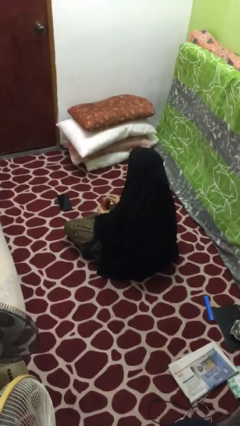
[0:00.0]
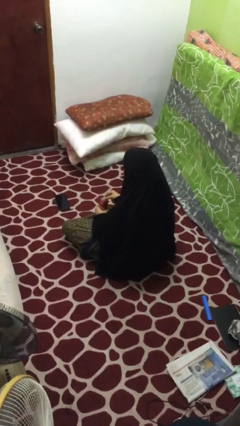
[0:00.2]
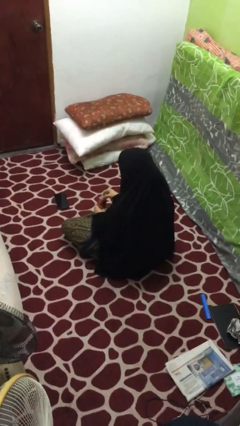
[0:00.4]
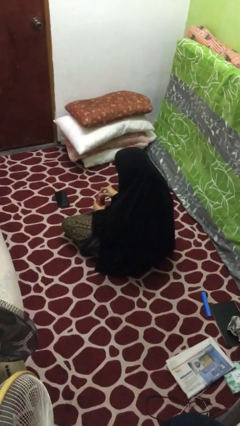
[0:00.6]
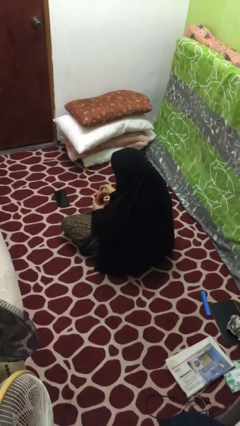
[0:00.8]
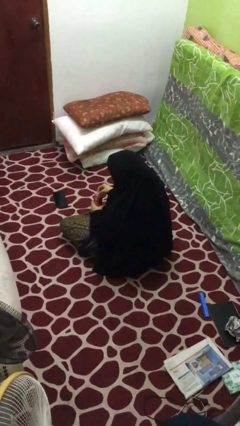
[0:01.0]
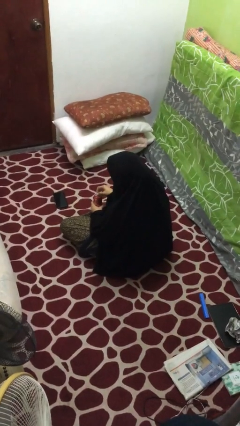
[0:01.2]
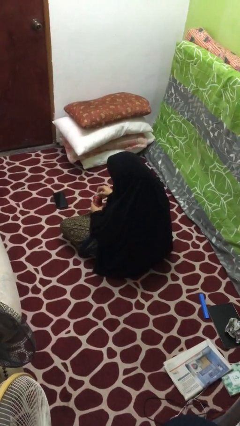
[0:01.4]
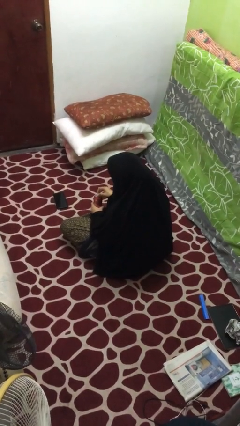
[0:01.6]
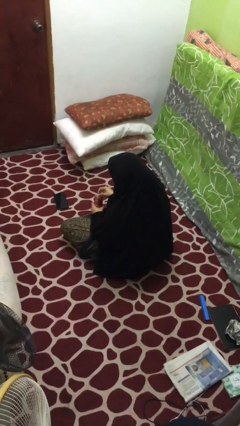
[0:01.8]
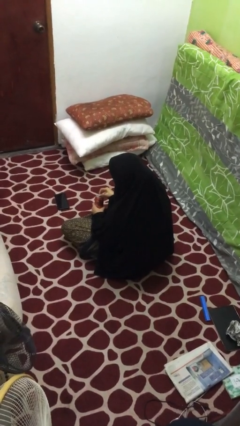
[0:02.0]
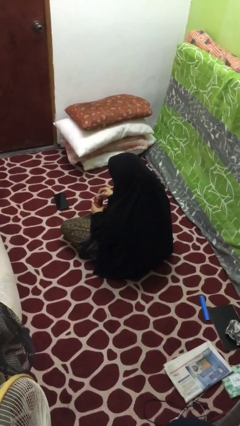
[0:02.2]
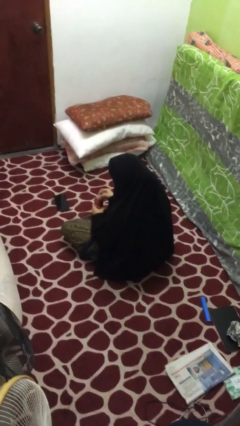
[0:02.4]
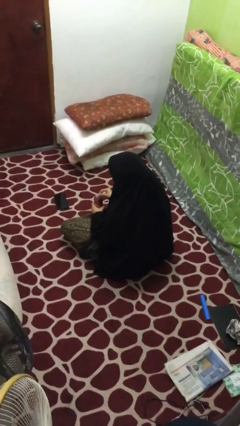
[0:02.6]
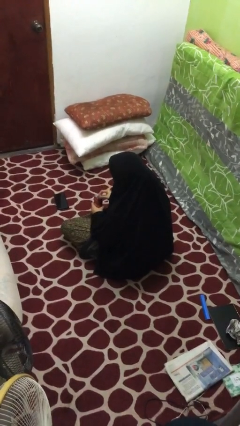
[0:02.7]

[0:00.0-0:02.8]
person opens beverage can

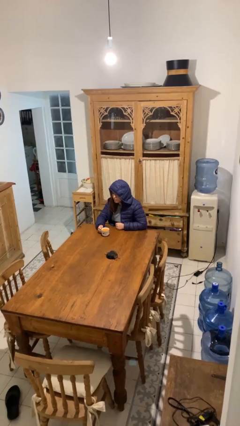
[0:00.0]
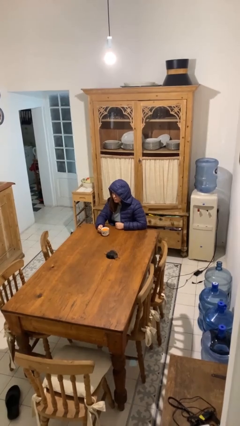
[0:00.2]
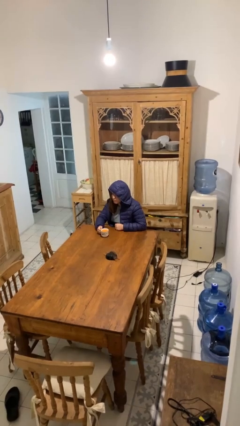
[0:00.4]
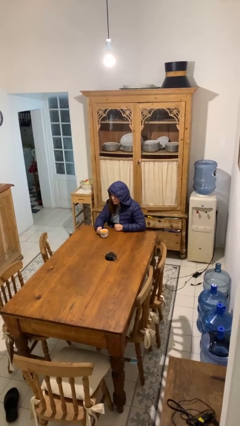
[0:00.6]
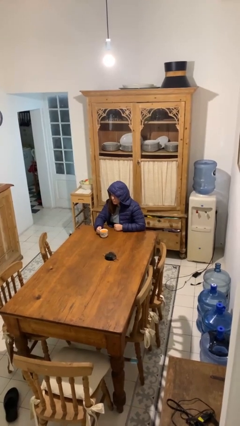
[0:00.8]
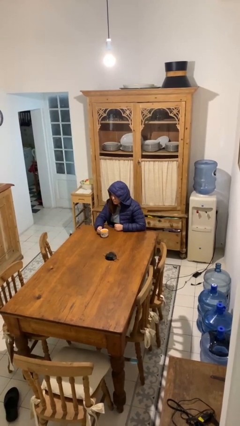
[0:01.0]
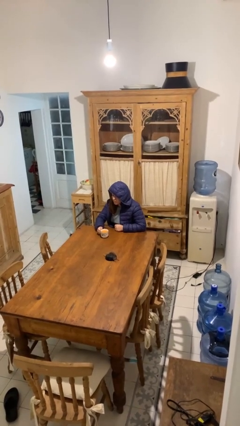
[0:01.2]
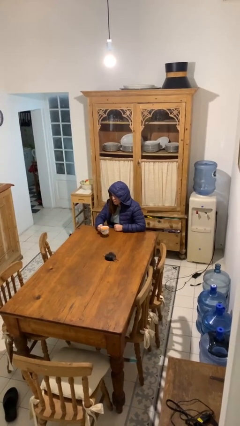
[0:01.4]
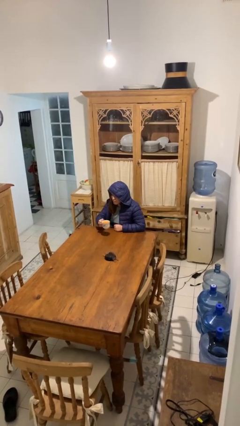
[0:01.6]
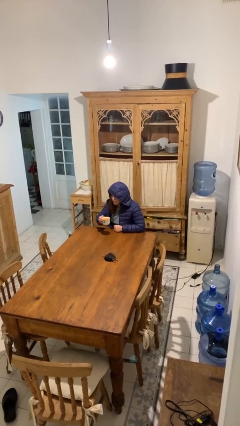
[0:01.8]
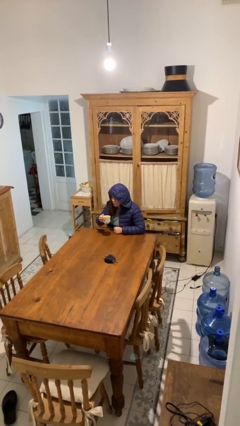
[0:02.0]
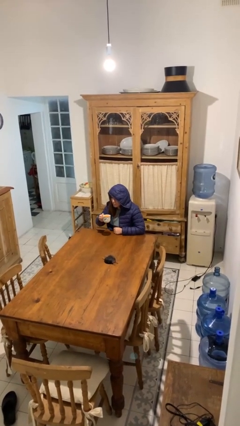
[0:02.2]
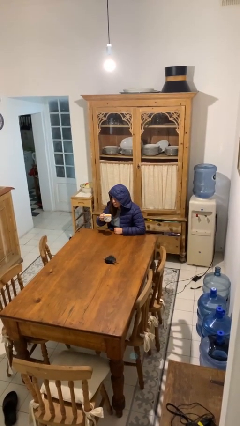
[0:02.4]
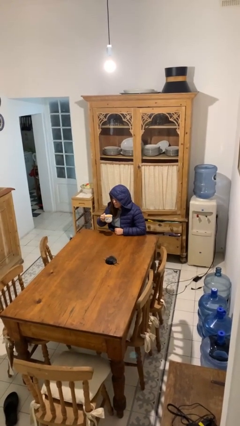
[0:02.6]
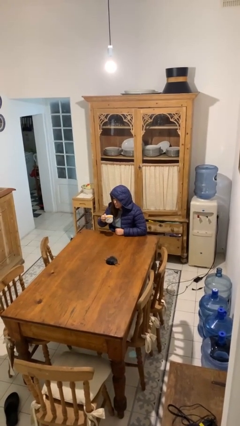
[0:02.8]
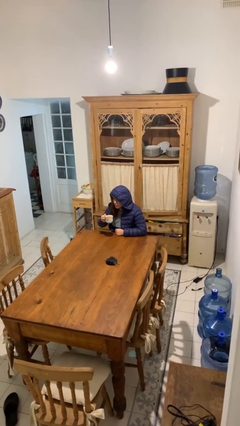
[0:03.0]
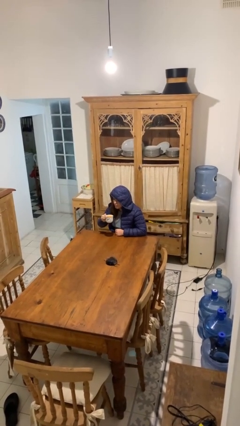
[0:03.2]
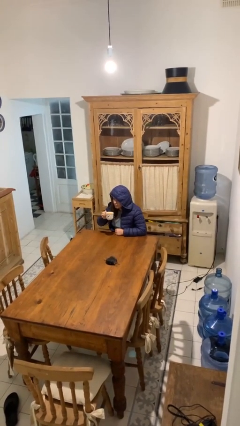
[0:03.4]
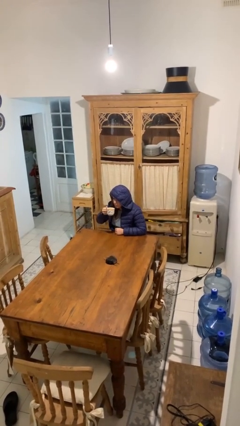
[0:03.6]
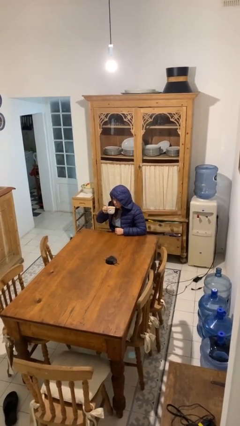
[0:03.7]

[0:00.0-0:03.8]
person picks up object from table

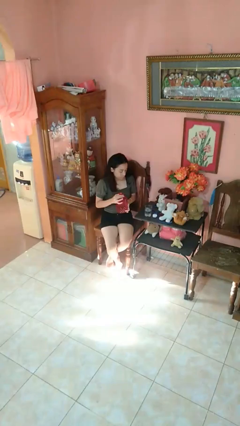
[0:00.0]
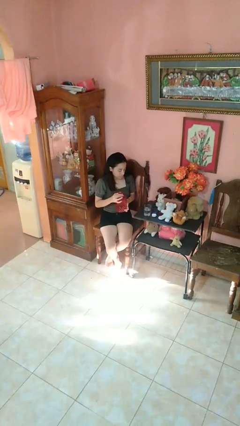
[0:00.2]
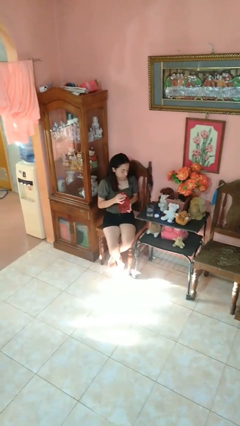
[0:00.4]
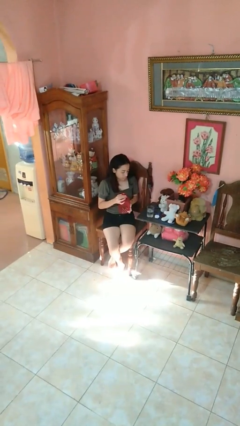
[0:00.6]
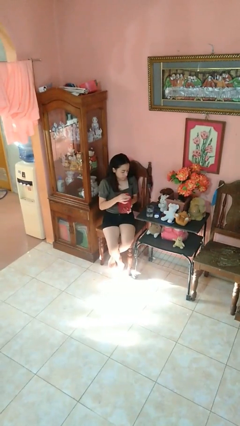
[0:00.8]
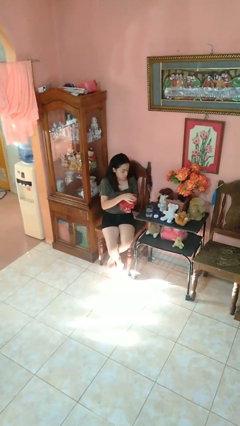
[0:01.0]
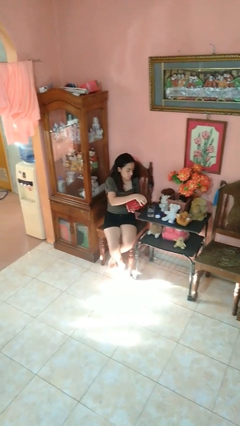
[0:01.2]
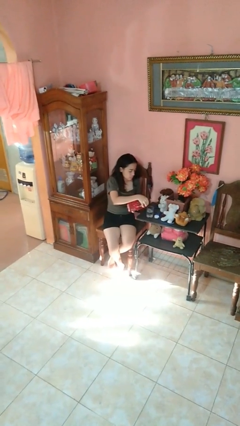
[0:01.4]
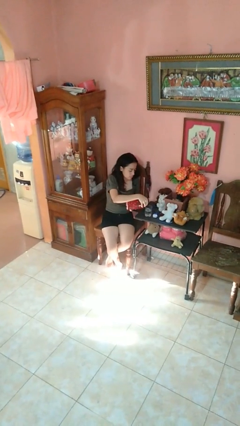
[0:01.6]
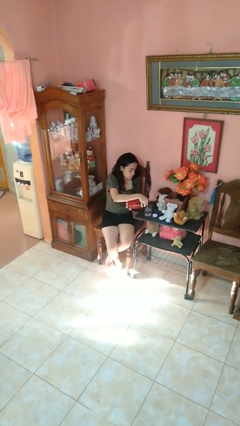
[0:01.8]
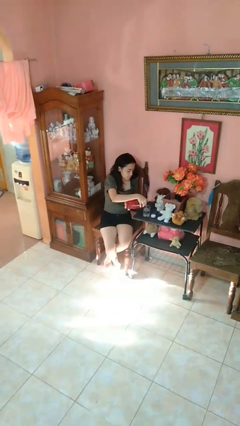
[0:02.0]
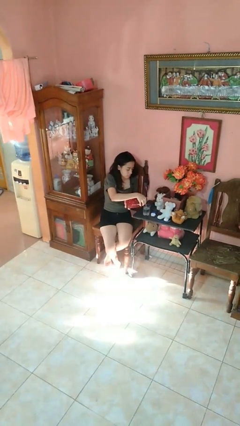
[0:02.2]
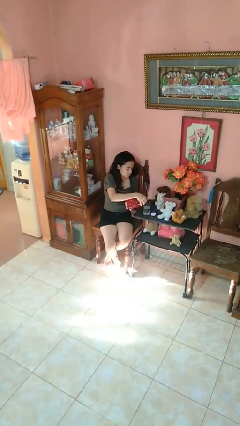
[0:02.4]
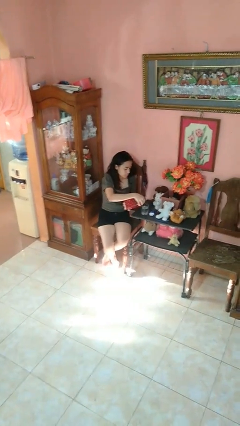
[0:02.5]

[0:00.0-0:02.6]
person pours liquid into cup

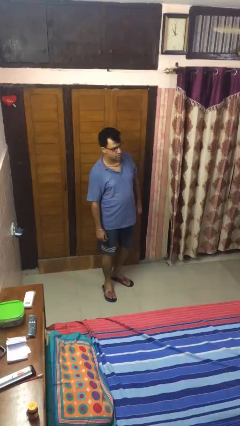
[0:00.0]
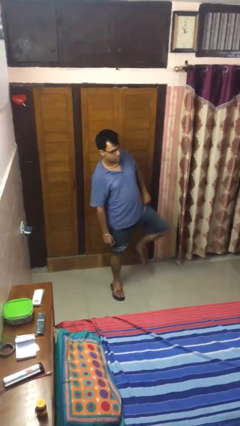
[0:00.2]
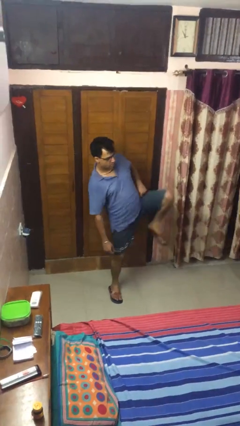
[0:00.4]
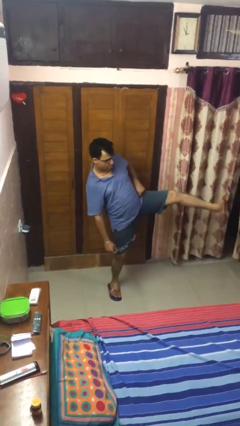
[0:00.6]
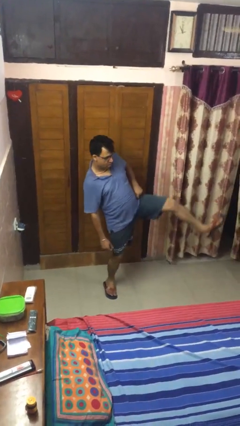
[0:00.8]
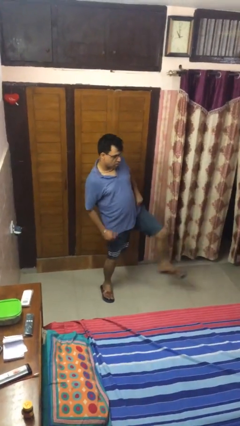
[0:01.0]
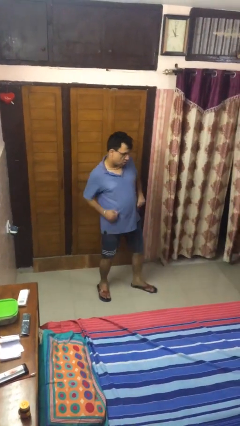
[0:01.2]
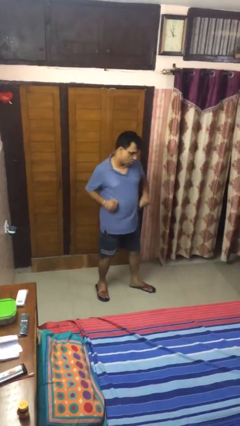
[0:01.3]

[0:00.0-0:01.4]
person karate kicks

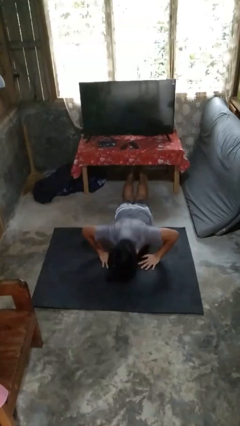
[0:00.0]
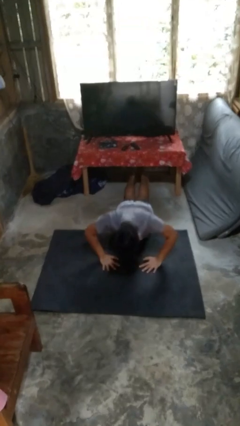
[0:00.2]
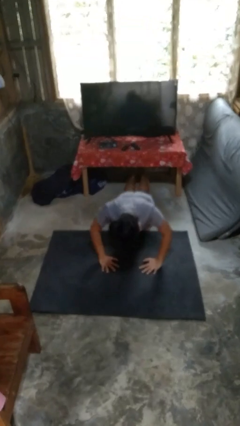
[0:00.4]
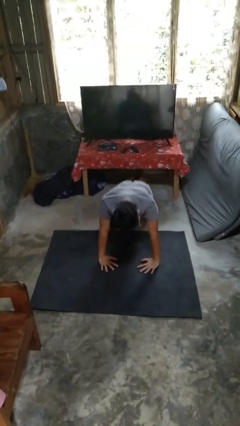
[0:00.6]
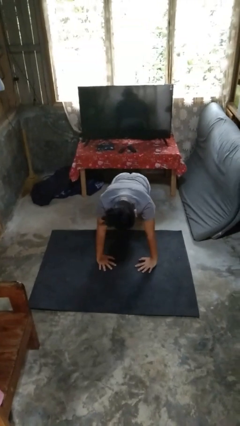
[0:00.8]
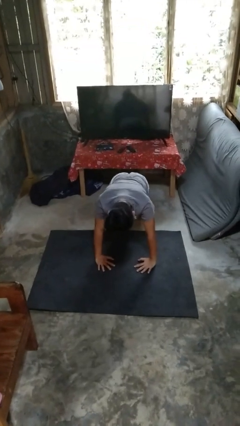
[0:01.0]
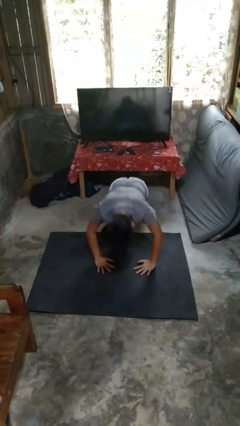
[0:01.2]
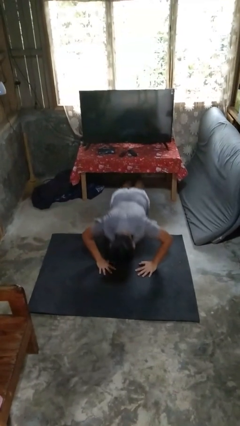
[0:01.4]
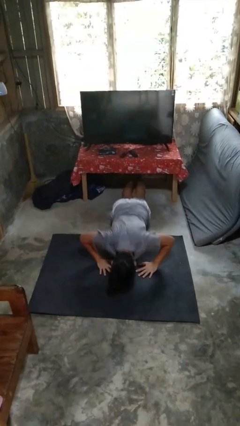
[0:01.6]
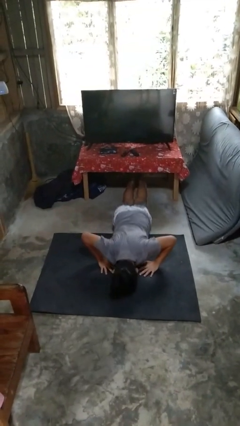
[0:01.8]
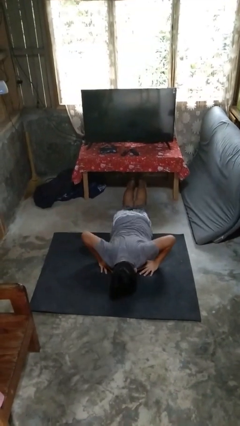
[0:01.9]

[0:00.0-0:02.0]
person exercises with pushup

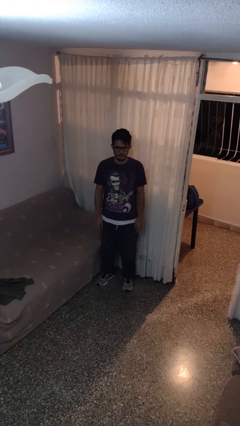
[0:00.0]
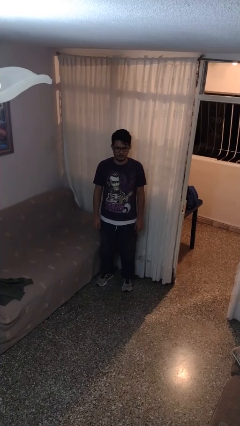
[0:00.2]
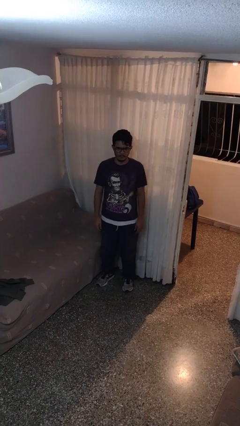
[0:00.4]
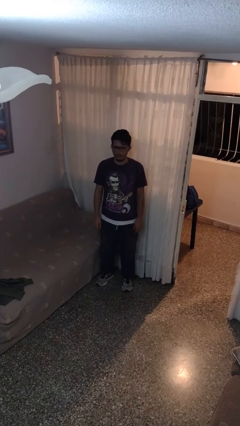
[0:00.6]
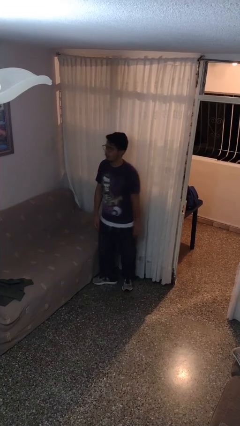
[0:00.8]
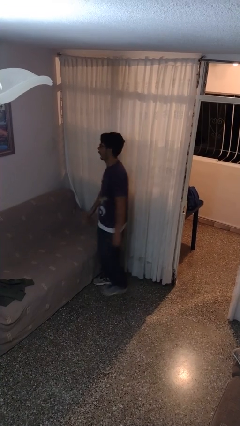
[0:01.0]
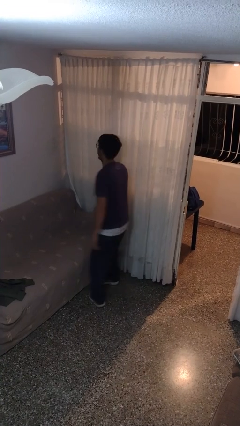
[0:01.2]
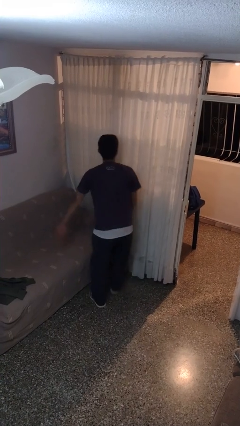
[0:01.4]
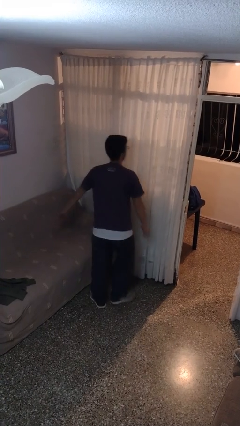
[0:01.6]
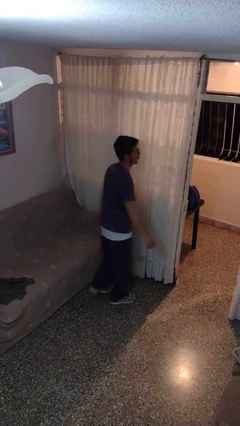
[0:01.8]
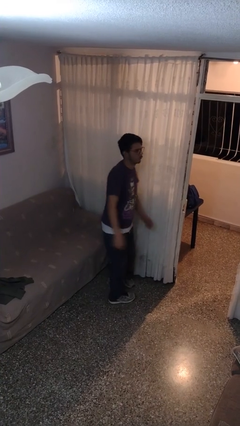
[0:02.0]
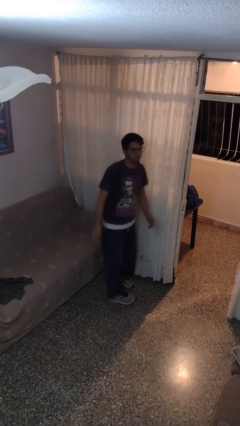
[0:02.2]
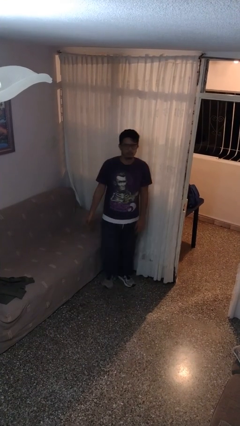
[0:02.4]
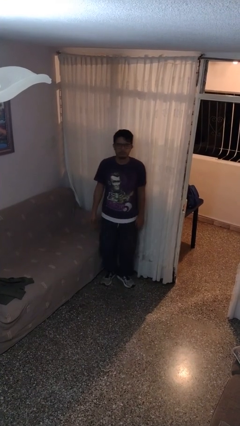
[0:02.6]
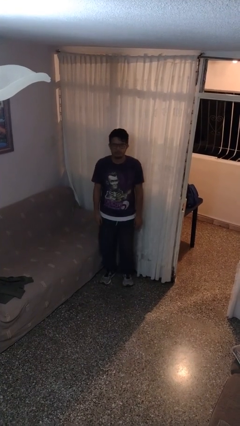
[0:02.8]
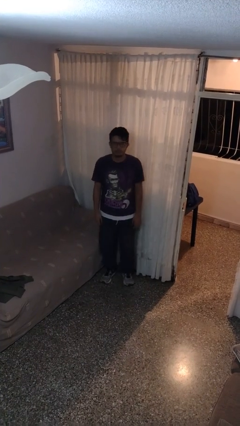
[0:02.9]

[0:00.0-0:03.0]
person twirls

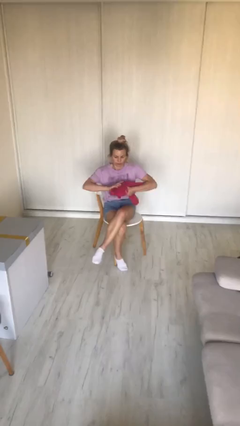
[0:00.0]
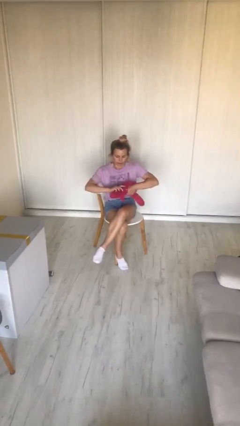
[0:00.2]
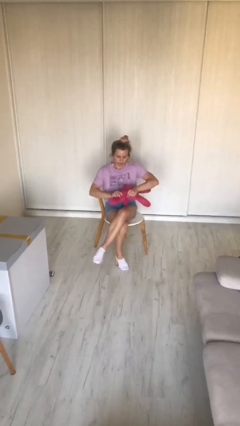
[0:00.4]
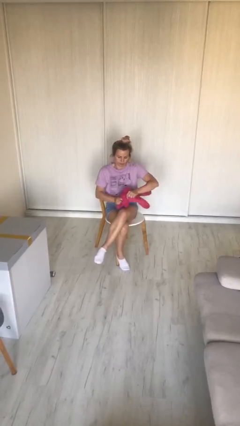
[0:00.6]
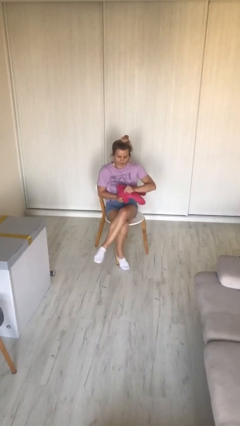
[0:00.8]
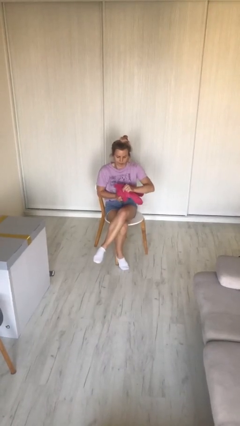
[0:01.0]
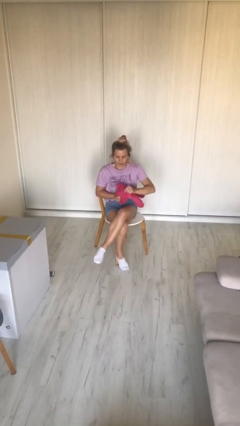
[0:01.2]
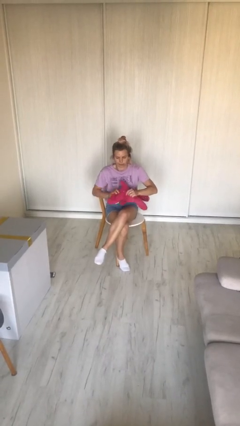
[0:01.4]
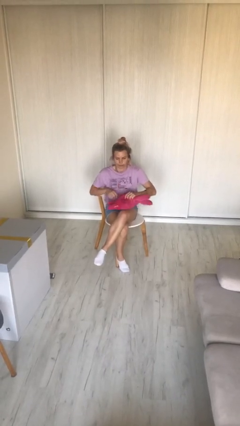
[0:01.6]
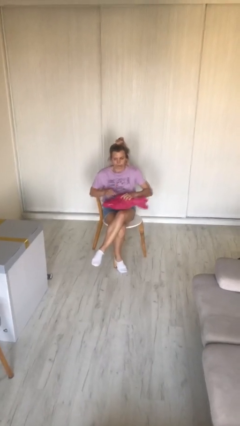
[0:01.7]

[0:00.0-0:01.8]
person squeezes object
